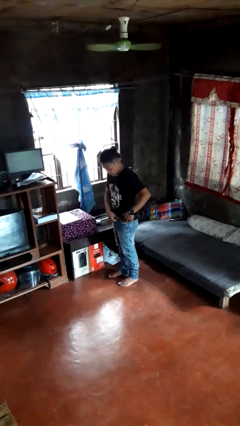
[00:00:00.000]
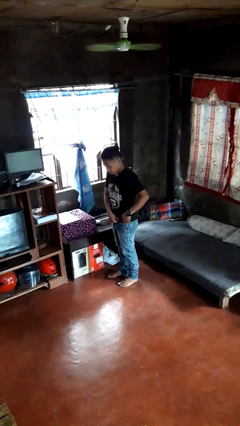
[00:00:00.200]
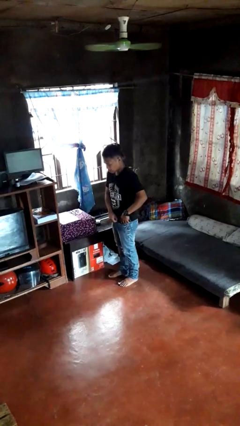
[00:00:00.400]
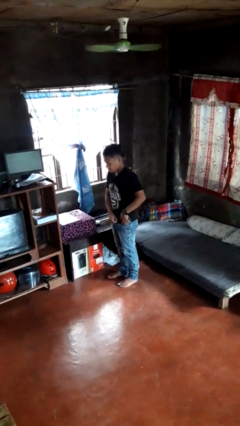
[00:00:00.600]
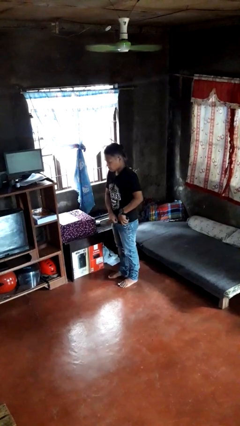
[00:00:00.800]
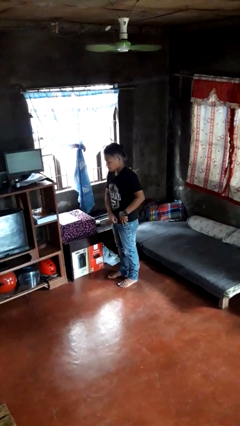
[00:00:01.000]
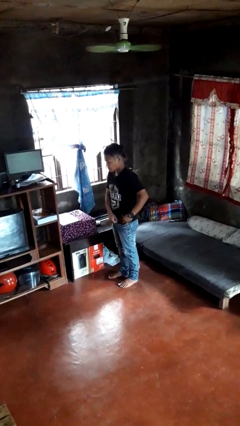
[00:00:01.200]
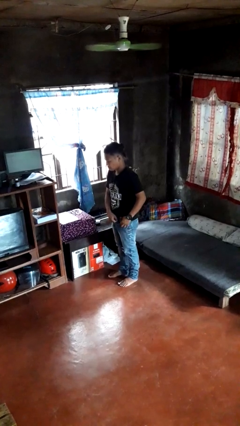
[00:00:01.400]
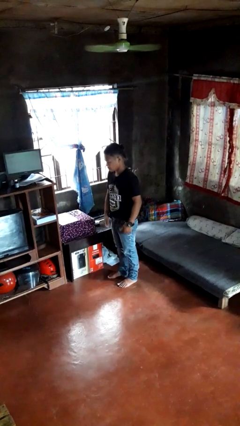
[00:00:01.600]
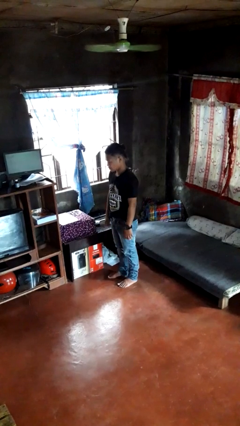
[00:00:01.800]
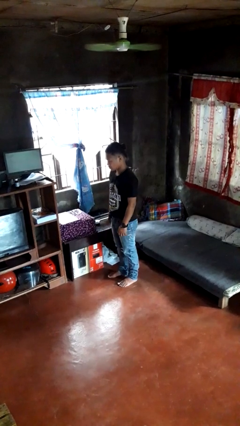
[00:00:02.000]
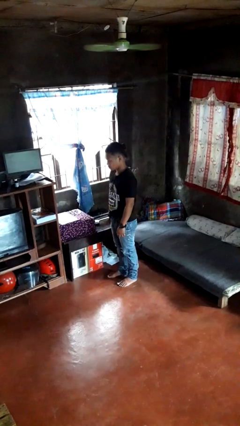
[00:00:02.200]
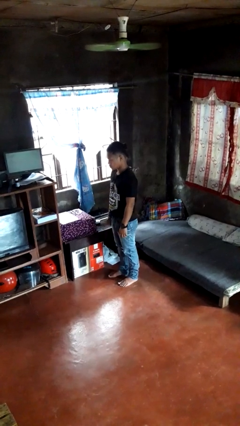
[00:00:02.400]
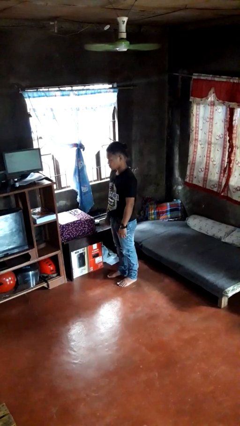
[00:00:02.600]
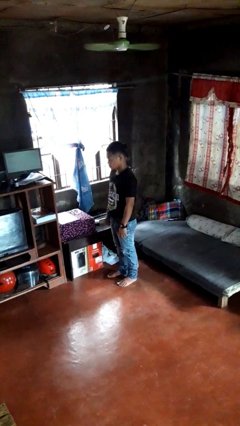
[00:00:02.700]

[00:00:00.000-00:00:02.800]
person puts phone into pocket

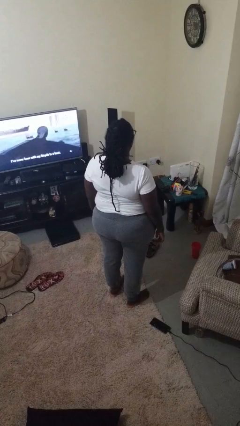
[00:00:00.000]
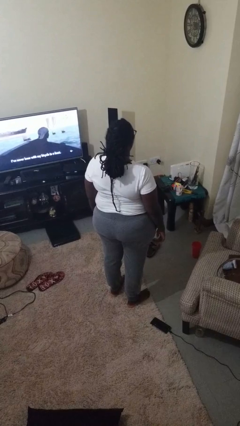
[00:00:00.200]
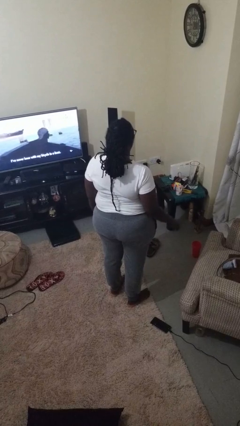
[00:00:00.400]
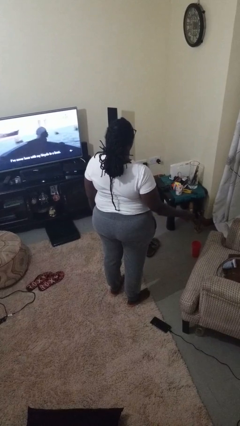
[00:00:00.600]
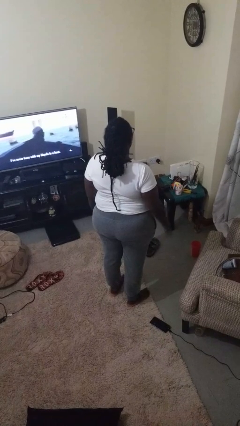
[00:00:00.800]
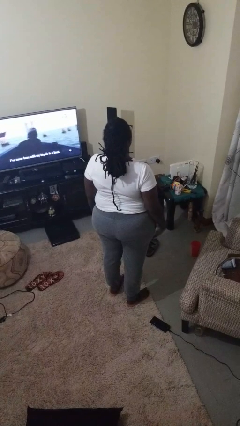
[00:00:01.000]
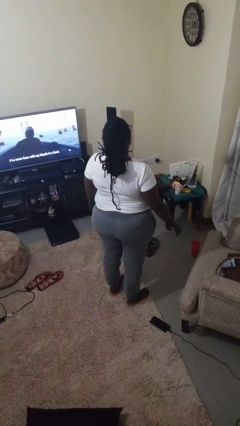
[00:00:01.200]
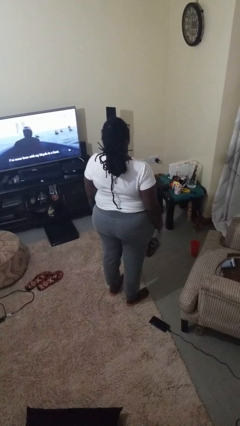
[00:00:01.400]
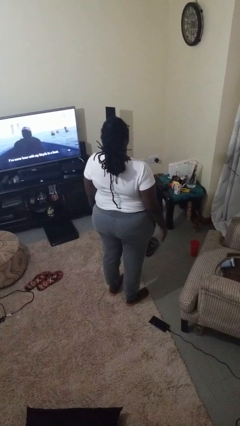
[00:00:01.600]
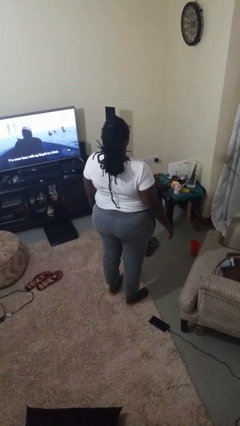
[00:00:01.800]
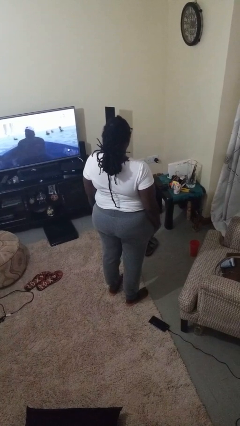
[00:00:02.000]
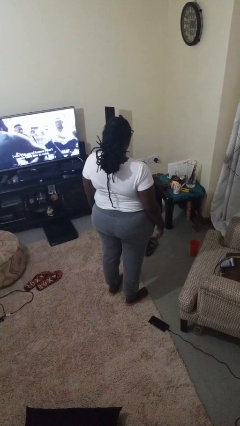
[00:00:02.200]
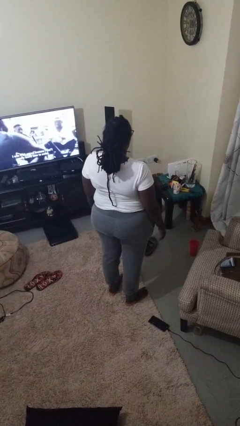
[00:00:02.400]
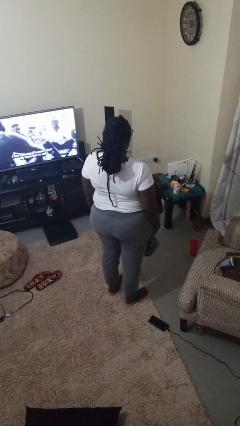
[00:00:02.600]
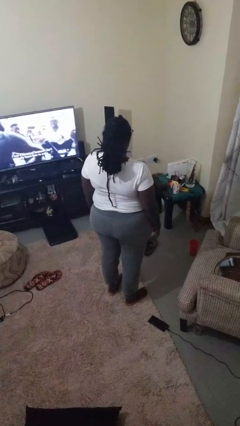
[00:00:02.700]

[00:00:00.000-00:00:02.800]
person slaps hands on thighs

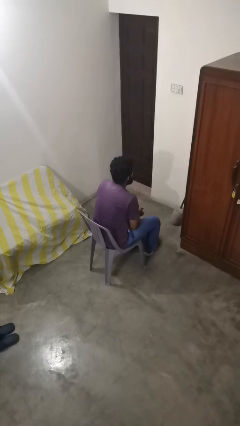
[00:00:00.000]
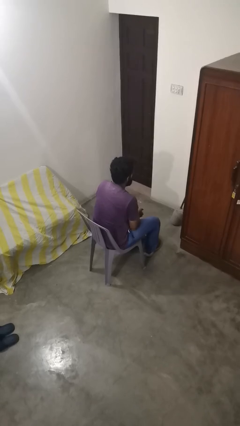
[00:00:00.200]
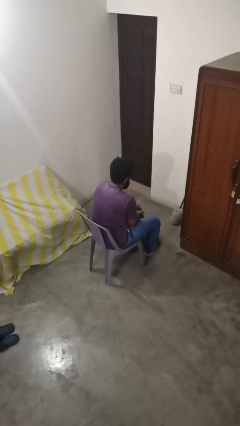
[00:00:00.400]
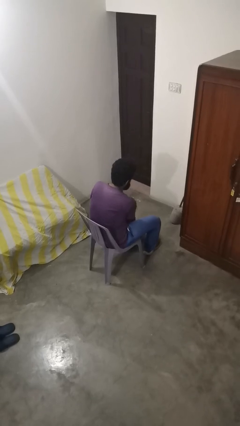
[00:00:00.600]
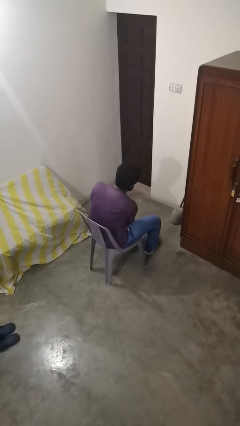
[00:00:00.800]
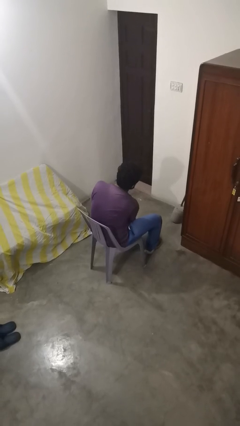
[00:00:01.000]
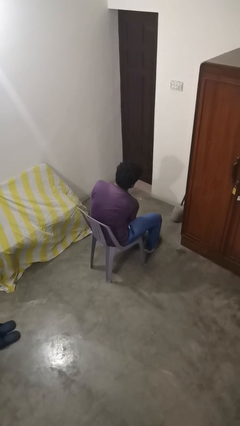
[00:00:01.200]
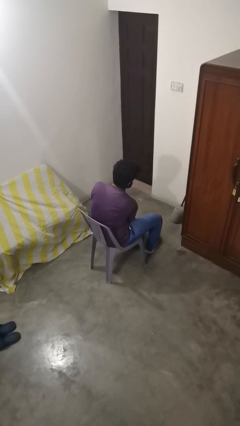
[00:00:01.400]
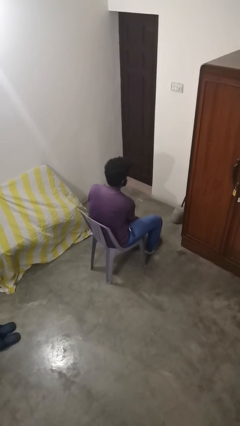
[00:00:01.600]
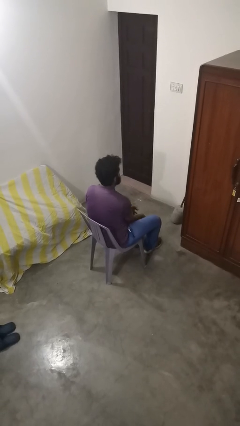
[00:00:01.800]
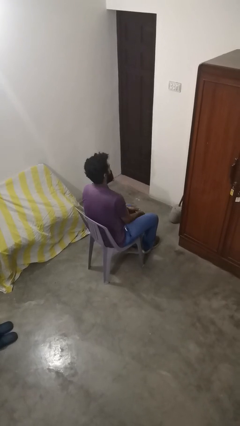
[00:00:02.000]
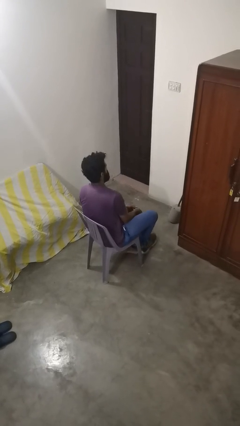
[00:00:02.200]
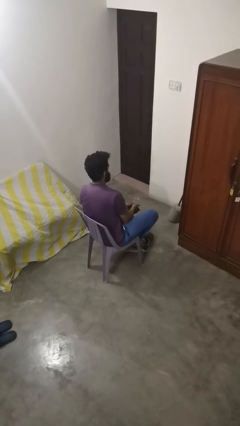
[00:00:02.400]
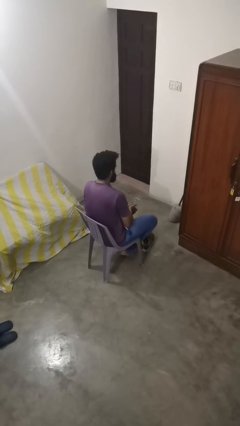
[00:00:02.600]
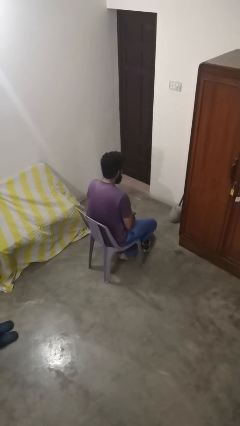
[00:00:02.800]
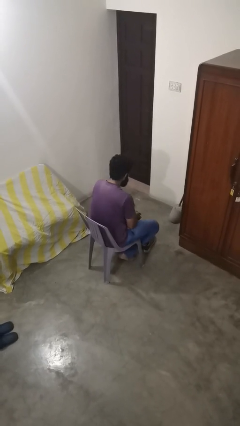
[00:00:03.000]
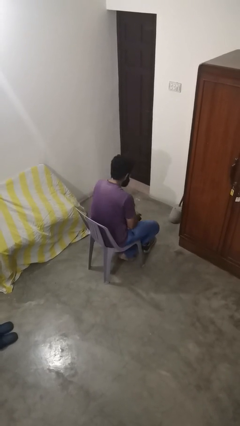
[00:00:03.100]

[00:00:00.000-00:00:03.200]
person takes off shoes

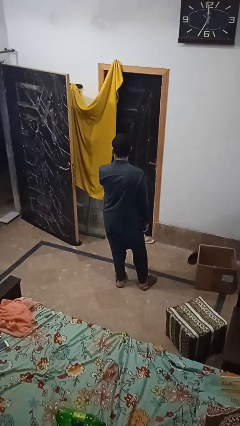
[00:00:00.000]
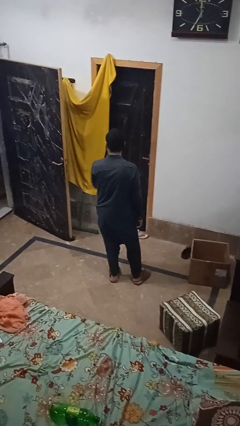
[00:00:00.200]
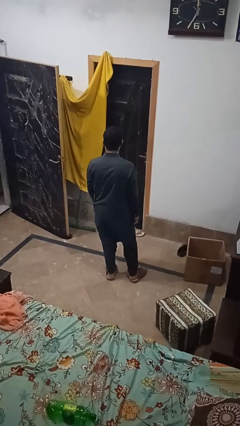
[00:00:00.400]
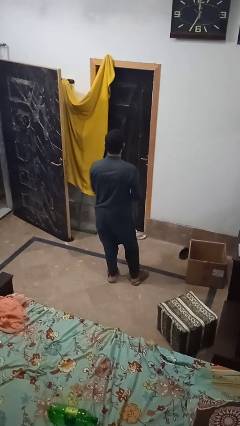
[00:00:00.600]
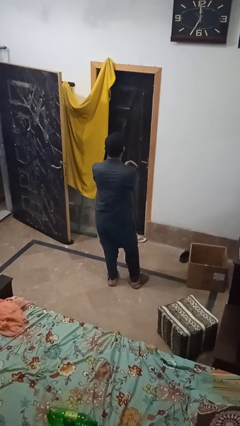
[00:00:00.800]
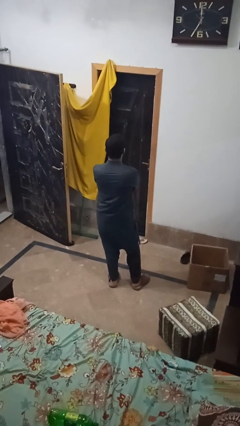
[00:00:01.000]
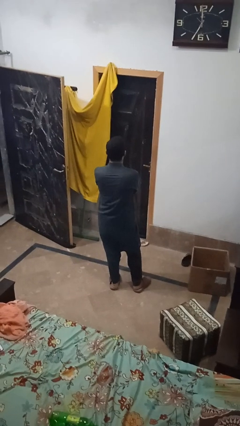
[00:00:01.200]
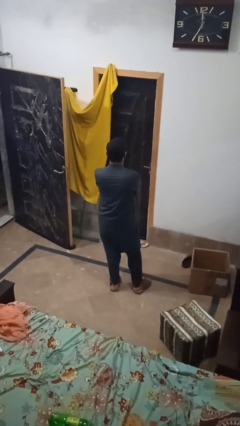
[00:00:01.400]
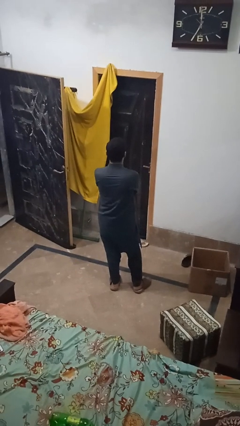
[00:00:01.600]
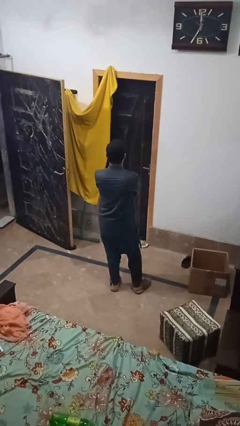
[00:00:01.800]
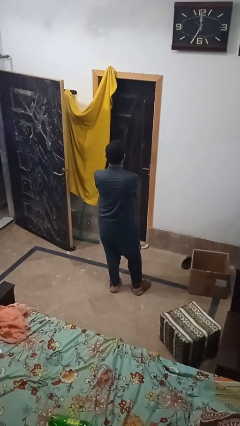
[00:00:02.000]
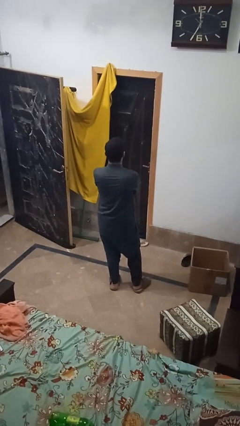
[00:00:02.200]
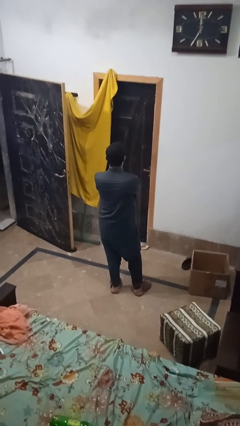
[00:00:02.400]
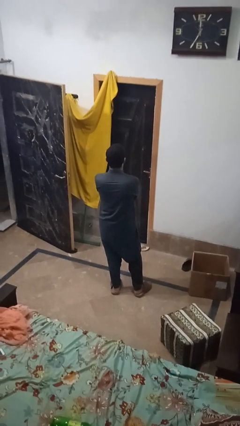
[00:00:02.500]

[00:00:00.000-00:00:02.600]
person gestures arms x

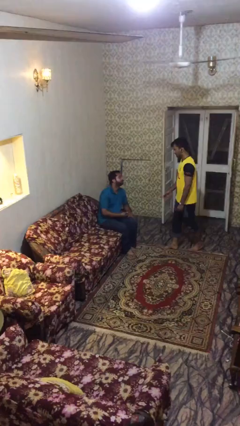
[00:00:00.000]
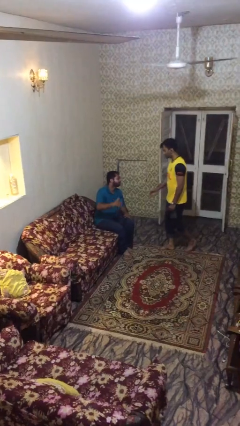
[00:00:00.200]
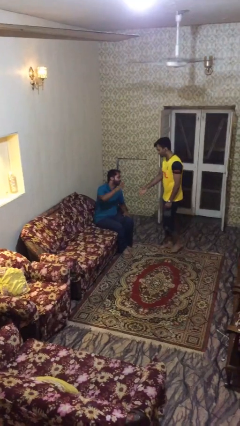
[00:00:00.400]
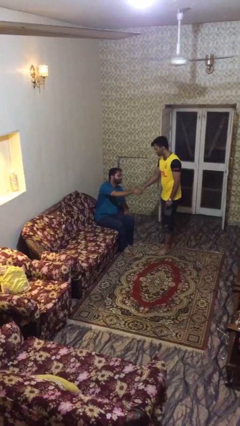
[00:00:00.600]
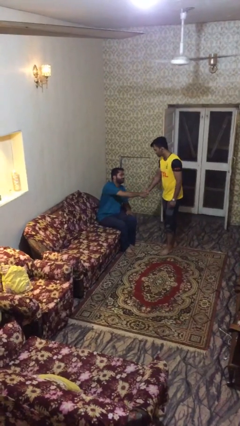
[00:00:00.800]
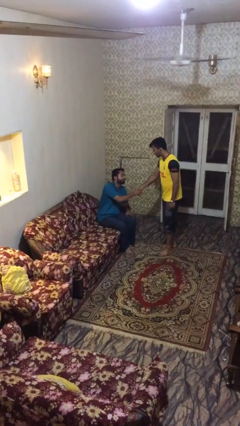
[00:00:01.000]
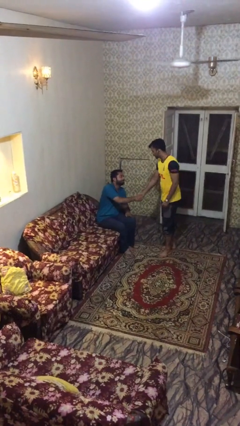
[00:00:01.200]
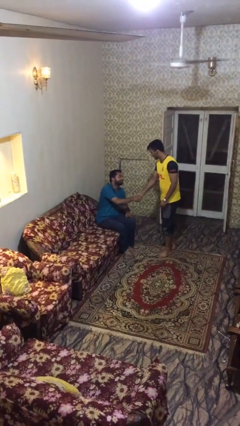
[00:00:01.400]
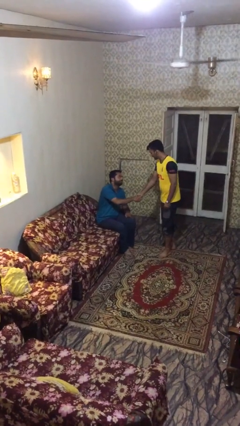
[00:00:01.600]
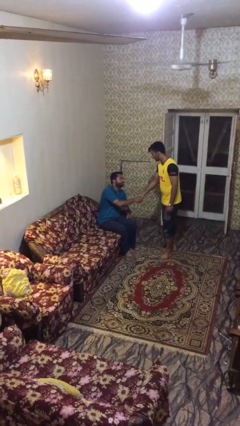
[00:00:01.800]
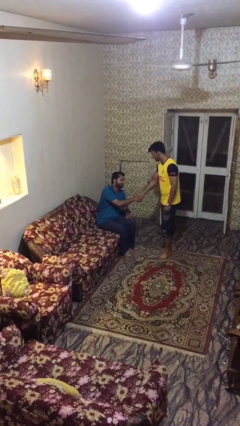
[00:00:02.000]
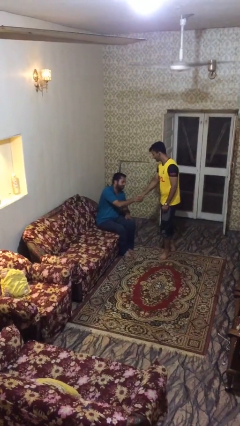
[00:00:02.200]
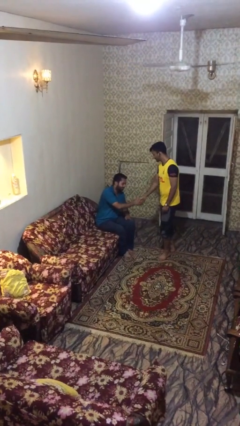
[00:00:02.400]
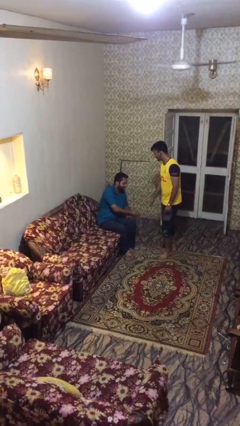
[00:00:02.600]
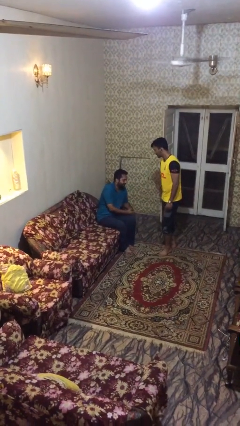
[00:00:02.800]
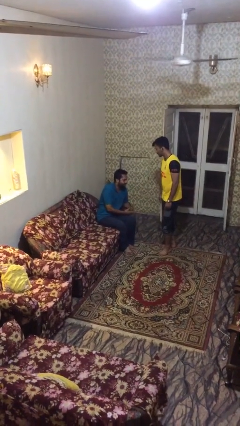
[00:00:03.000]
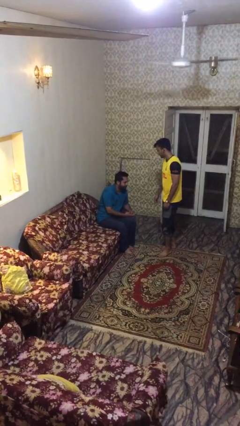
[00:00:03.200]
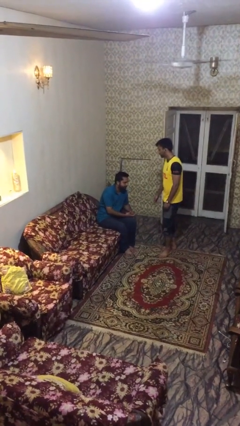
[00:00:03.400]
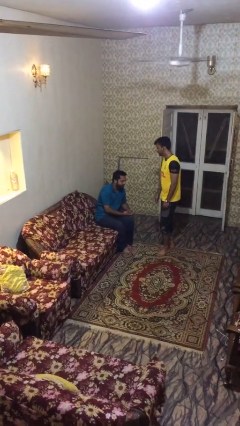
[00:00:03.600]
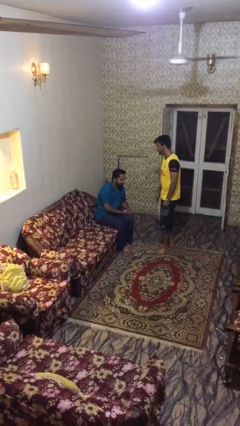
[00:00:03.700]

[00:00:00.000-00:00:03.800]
person shakes hand

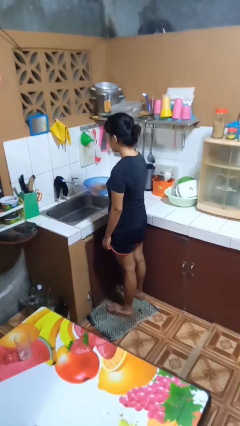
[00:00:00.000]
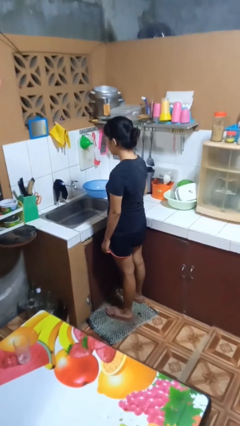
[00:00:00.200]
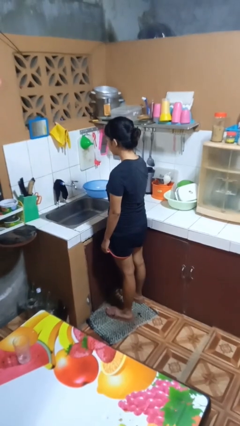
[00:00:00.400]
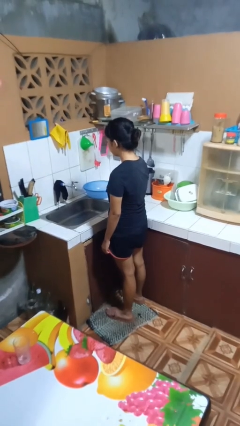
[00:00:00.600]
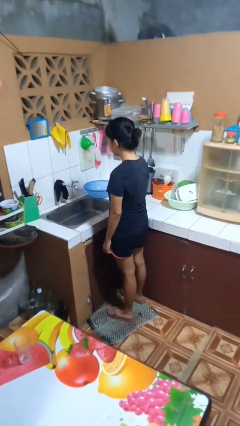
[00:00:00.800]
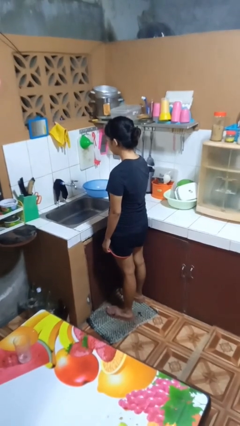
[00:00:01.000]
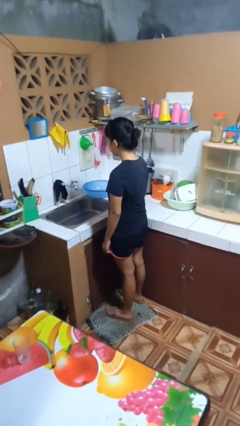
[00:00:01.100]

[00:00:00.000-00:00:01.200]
person turns off faucet

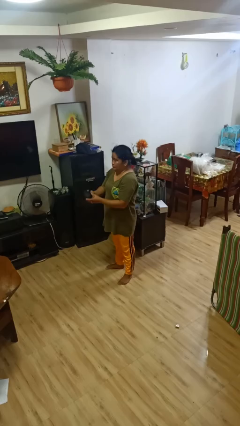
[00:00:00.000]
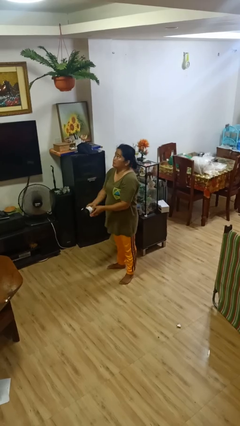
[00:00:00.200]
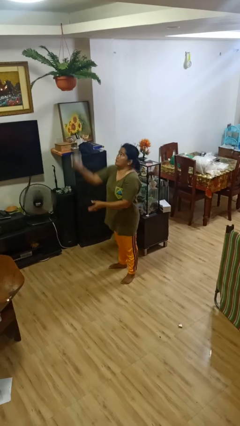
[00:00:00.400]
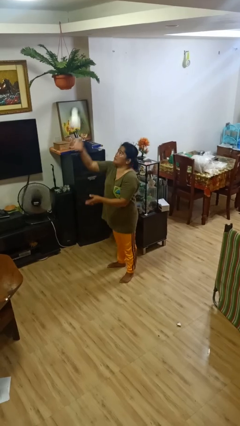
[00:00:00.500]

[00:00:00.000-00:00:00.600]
person drops object
